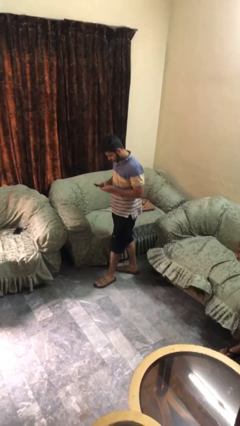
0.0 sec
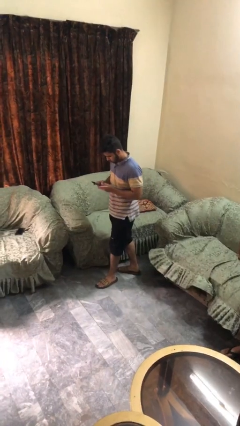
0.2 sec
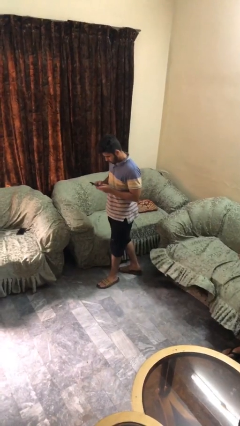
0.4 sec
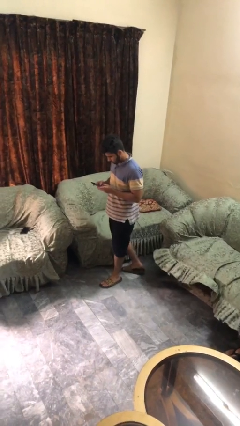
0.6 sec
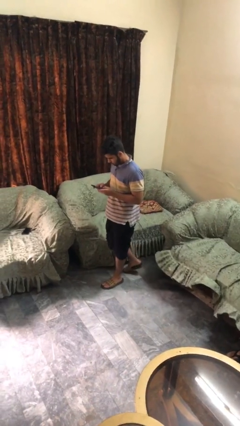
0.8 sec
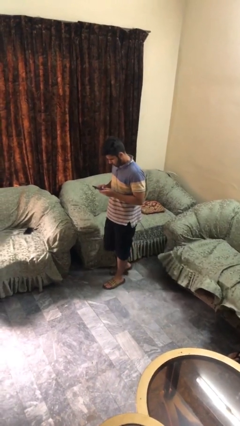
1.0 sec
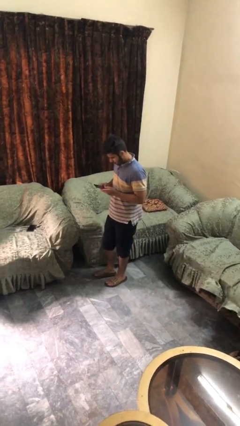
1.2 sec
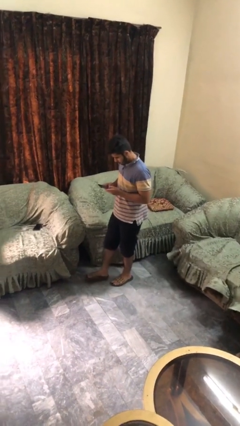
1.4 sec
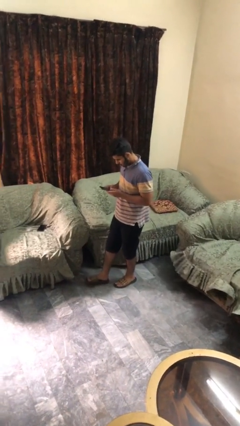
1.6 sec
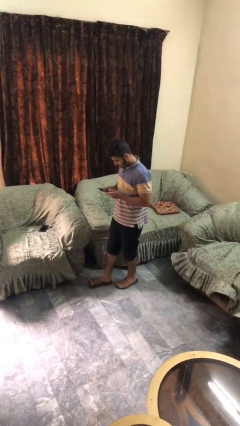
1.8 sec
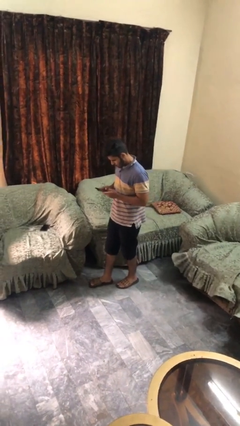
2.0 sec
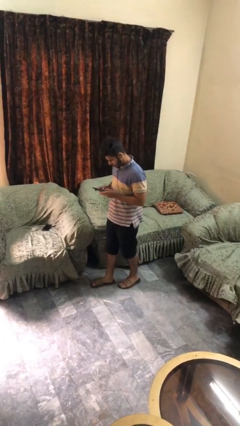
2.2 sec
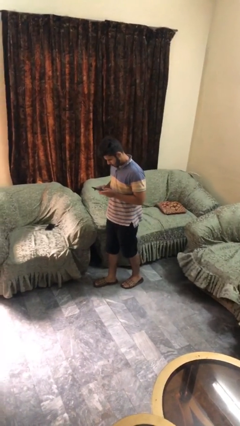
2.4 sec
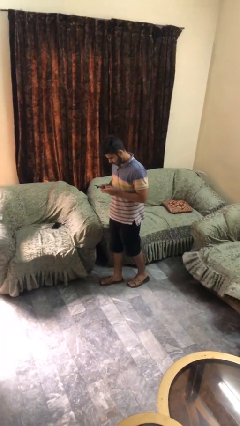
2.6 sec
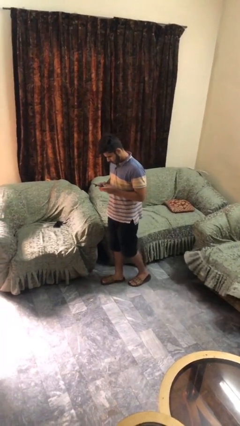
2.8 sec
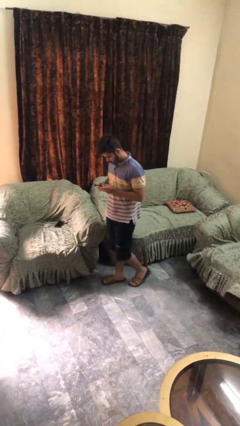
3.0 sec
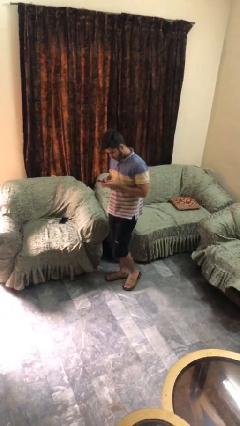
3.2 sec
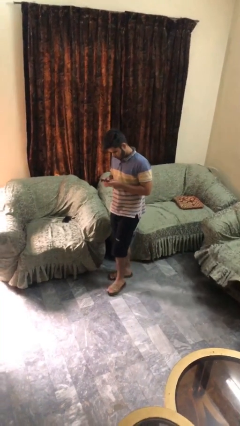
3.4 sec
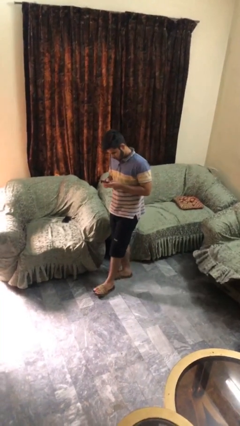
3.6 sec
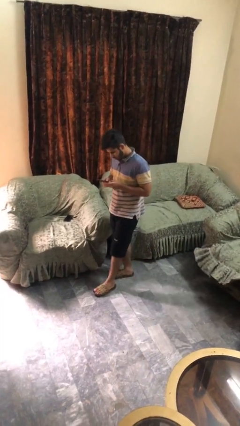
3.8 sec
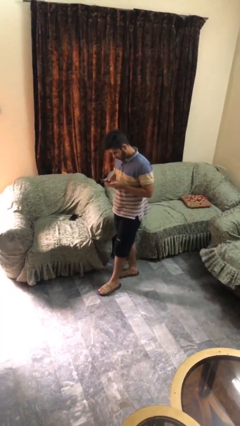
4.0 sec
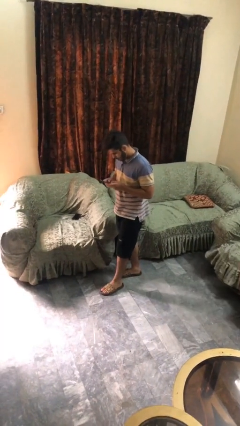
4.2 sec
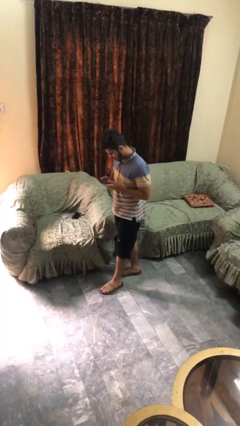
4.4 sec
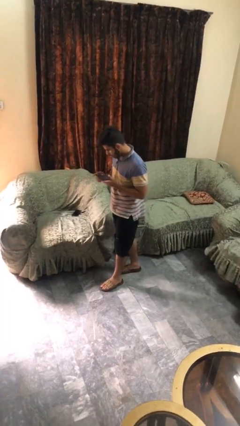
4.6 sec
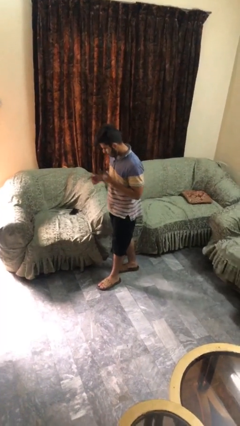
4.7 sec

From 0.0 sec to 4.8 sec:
person texts on phone

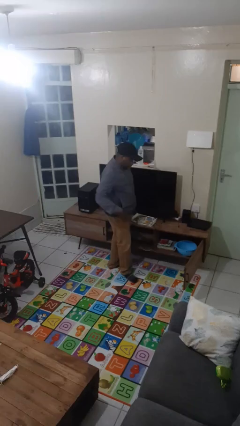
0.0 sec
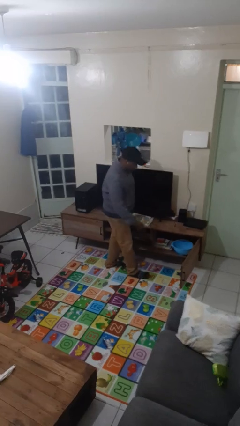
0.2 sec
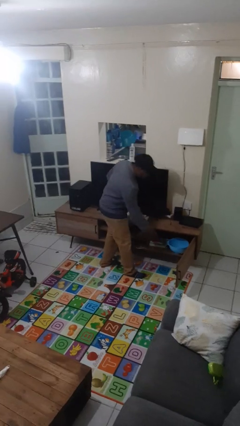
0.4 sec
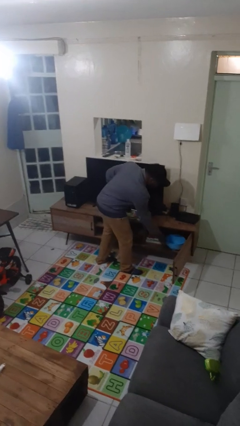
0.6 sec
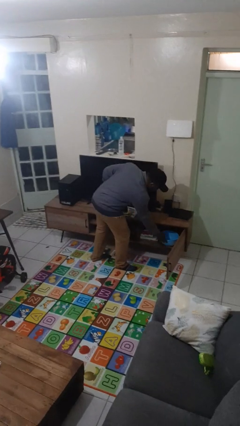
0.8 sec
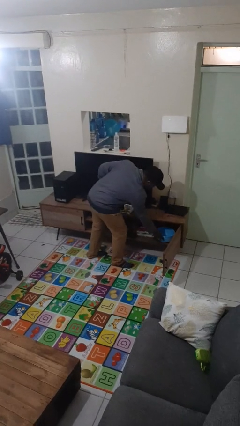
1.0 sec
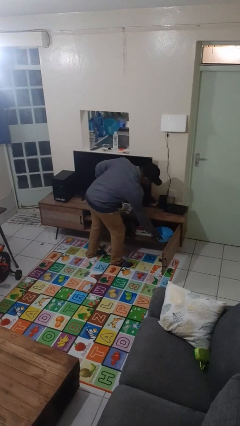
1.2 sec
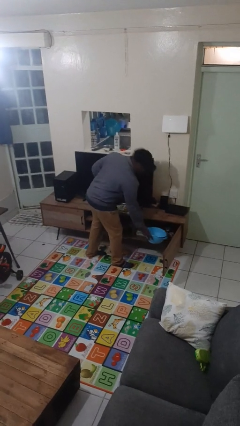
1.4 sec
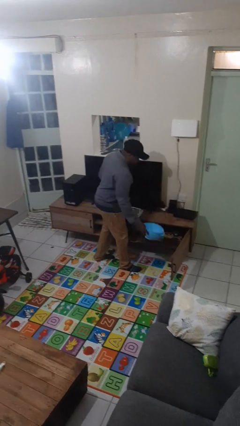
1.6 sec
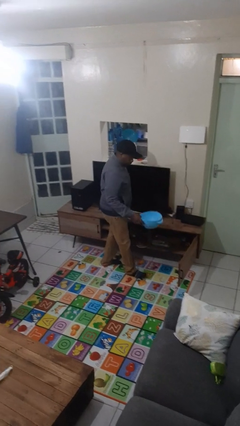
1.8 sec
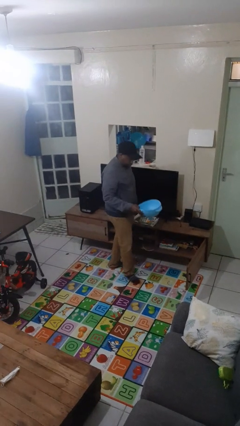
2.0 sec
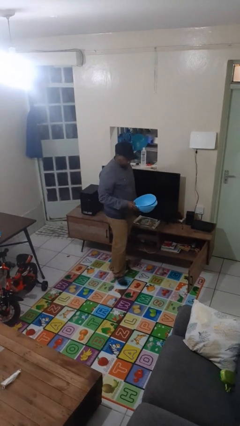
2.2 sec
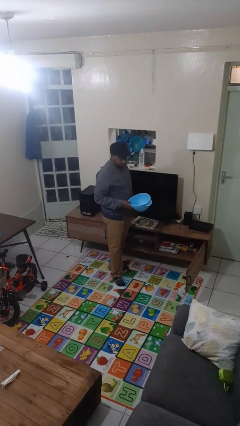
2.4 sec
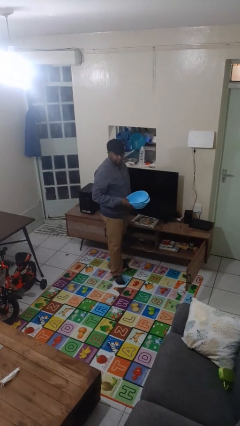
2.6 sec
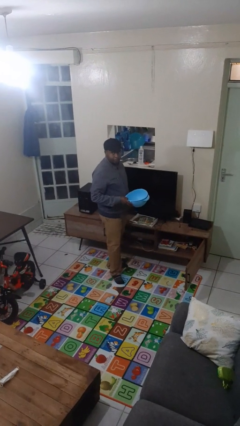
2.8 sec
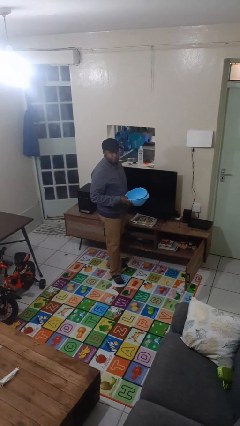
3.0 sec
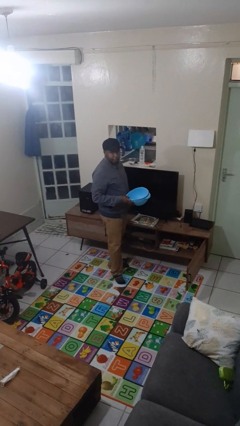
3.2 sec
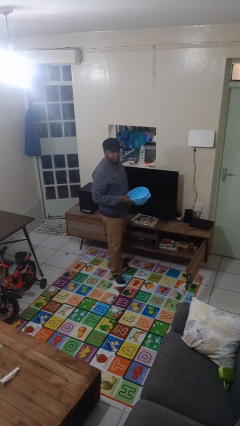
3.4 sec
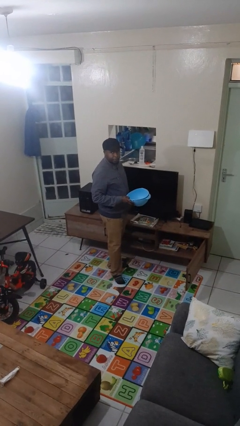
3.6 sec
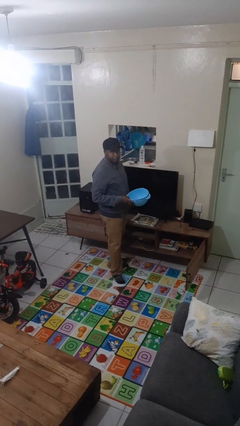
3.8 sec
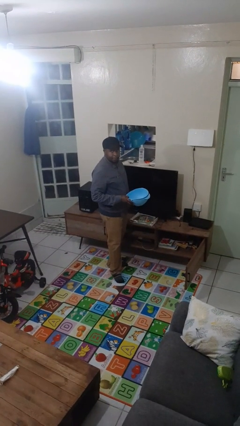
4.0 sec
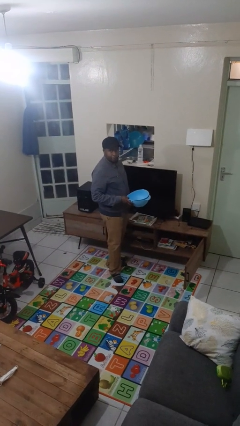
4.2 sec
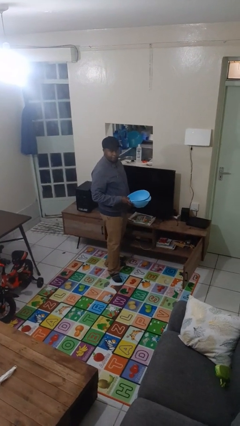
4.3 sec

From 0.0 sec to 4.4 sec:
person picks up object from cabinet

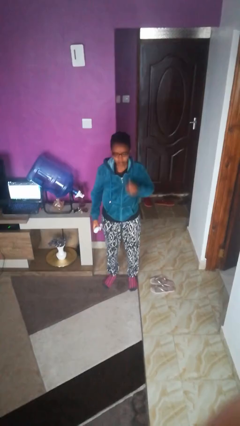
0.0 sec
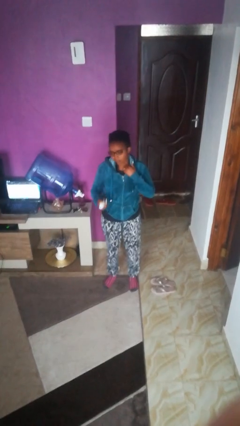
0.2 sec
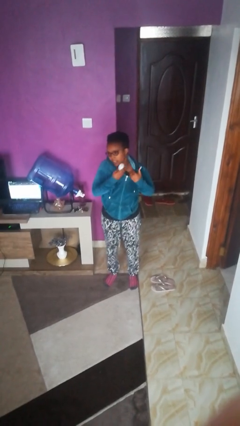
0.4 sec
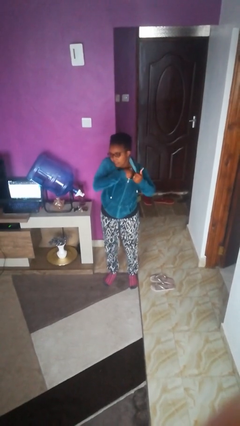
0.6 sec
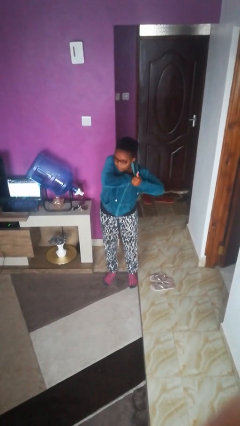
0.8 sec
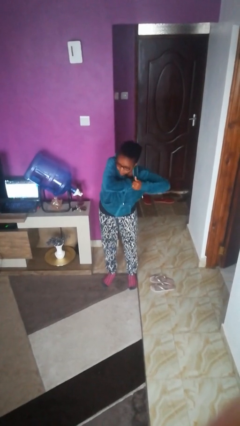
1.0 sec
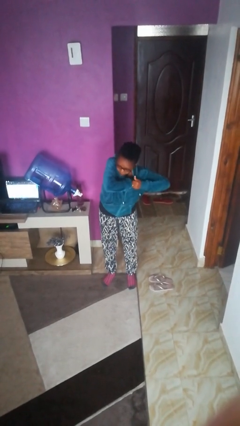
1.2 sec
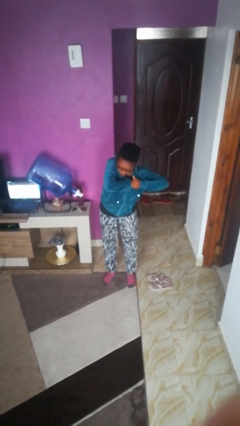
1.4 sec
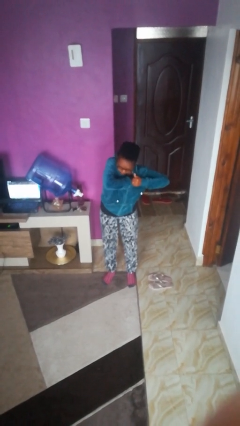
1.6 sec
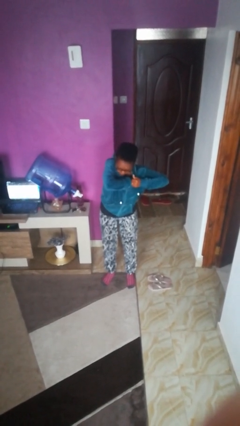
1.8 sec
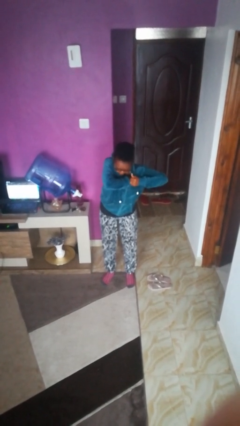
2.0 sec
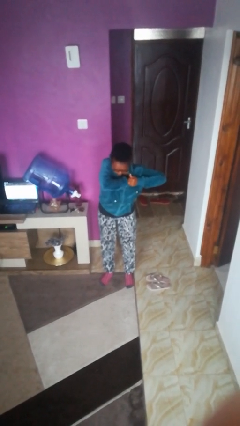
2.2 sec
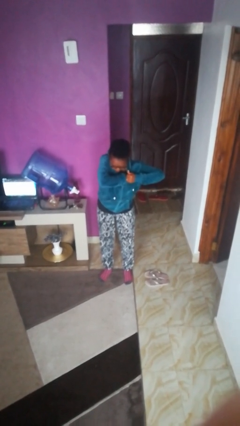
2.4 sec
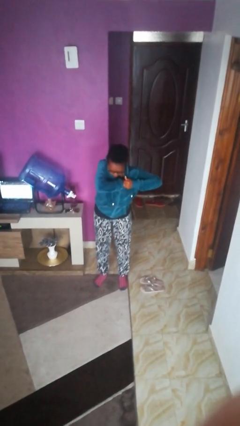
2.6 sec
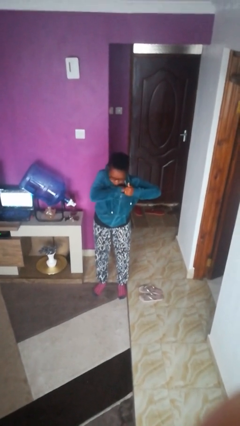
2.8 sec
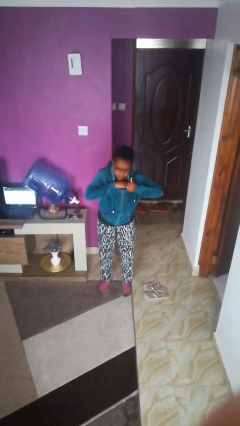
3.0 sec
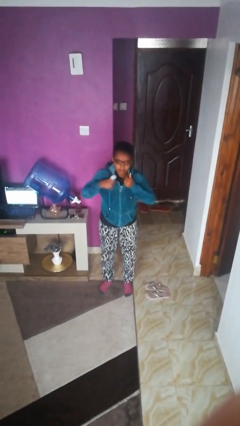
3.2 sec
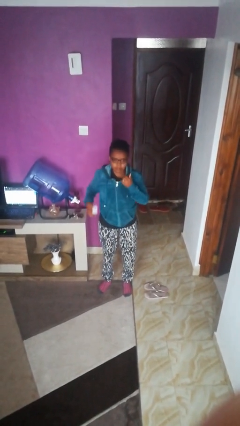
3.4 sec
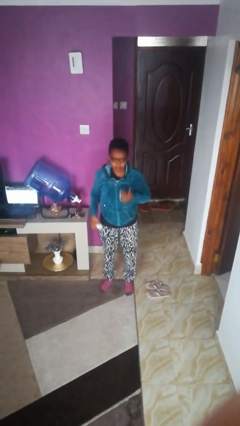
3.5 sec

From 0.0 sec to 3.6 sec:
person applies deodorant

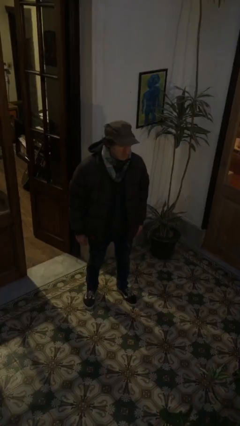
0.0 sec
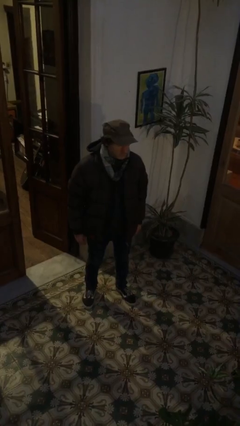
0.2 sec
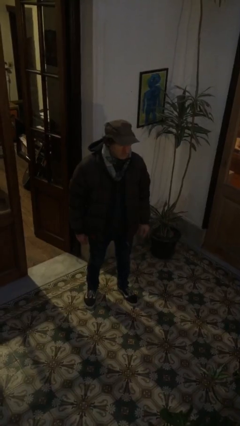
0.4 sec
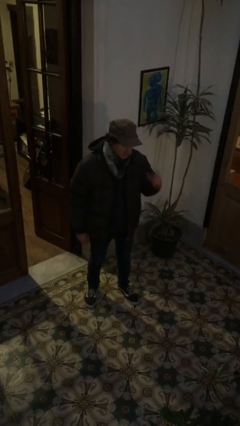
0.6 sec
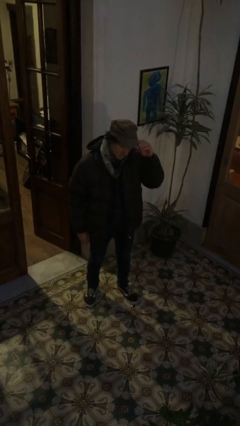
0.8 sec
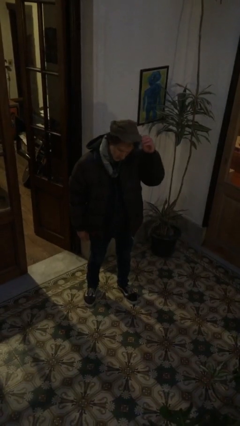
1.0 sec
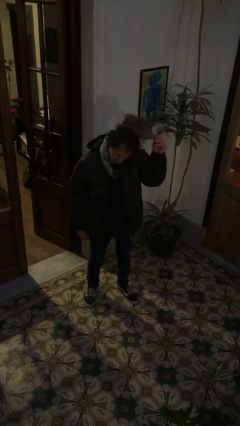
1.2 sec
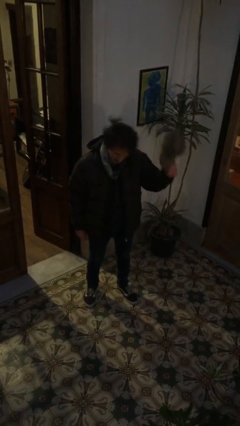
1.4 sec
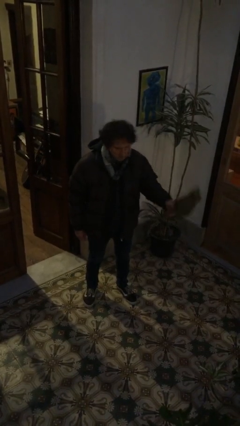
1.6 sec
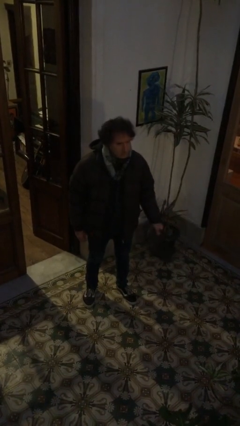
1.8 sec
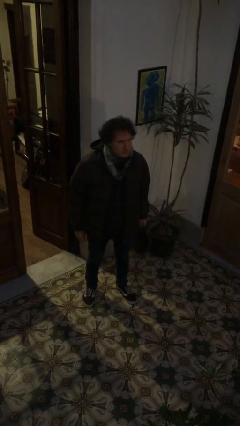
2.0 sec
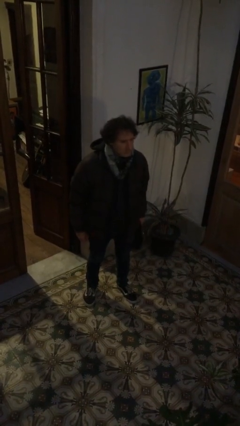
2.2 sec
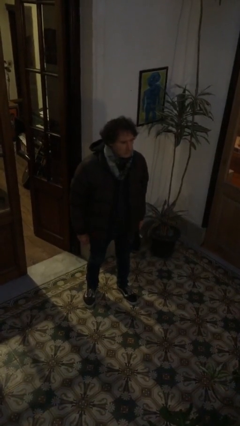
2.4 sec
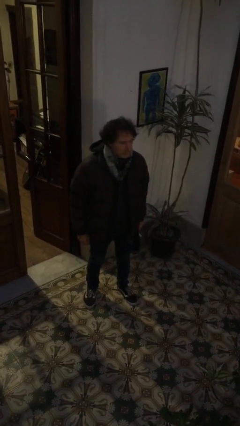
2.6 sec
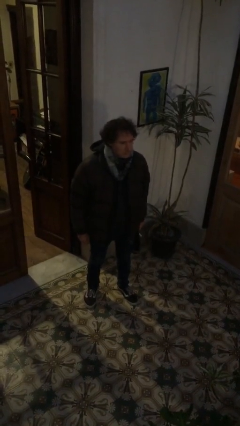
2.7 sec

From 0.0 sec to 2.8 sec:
person takes off hat

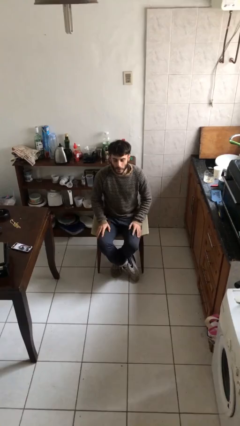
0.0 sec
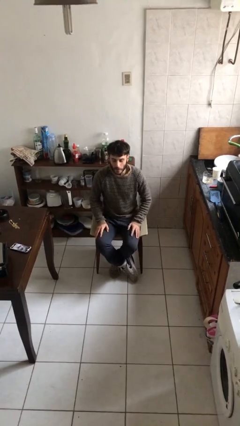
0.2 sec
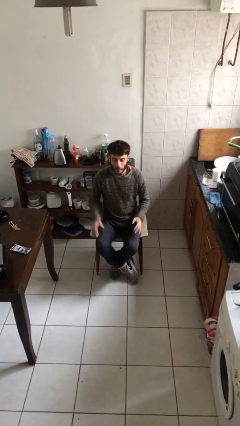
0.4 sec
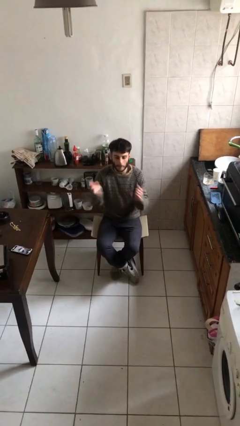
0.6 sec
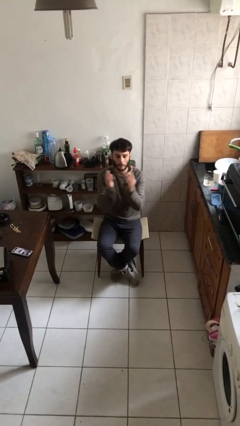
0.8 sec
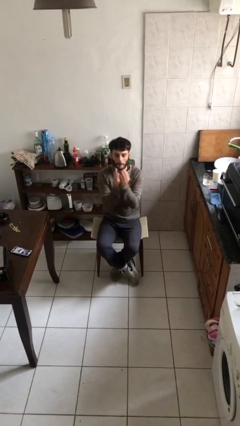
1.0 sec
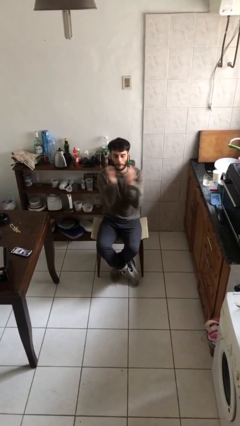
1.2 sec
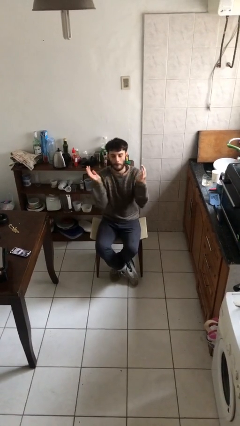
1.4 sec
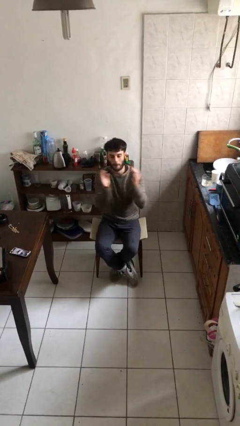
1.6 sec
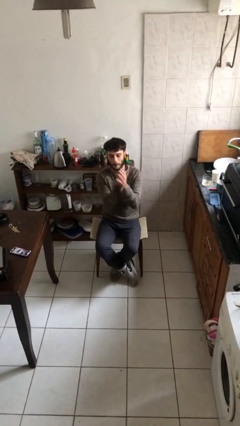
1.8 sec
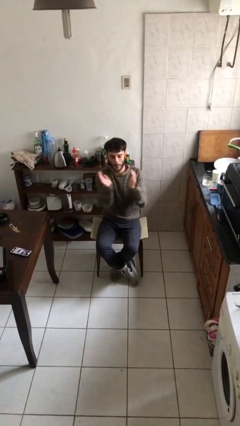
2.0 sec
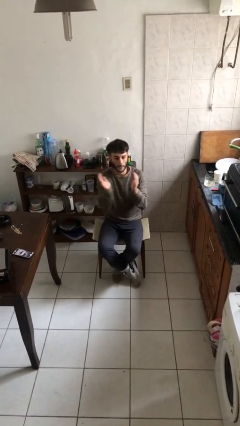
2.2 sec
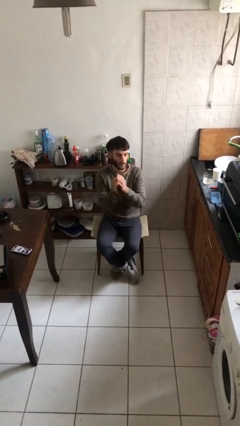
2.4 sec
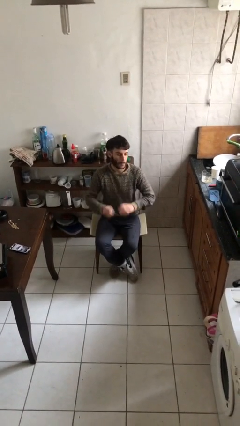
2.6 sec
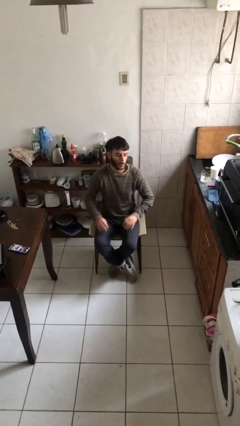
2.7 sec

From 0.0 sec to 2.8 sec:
person claps hands
